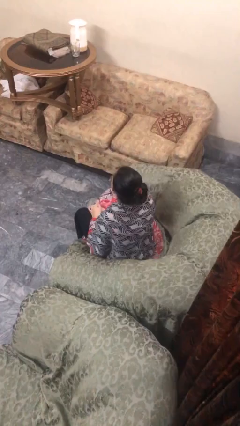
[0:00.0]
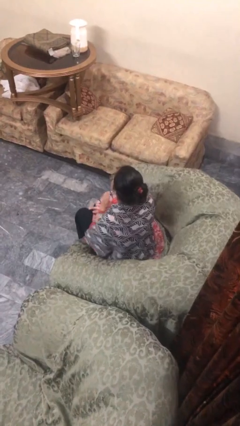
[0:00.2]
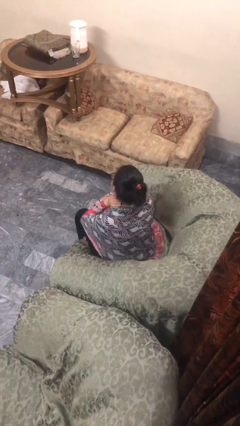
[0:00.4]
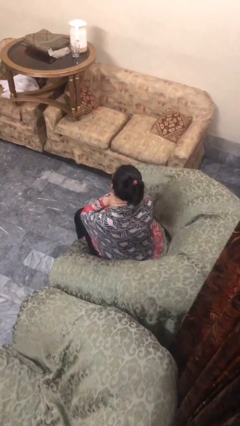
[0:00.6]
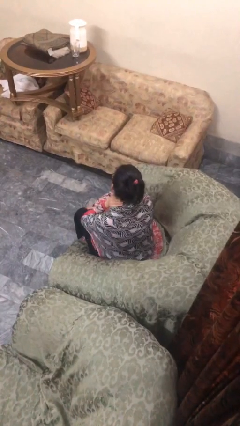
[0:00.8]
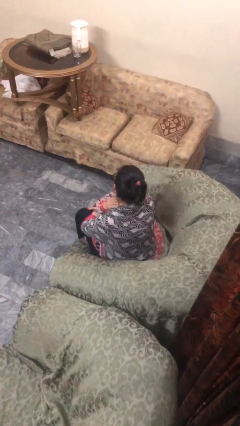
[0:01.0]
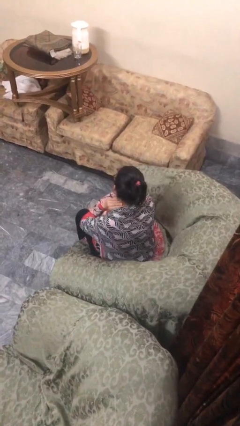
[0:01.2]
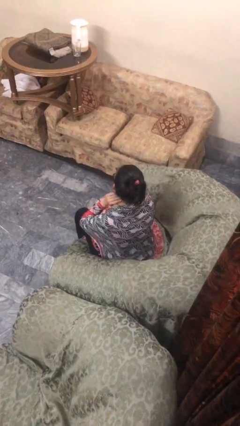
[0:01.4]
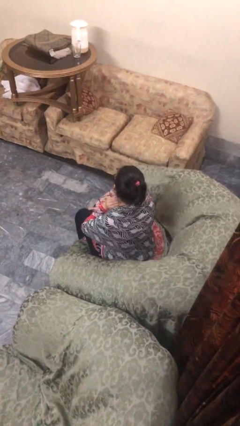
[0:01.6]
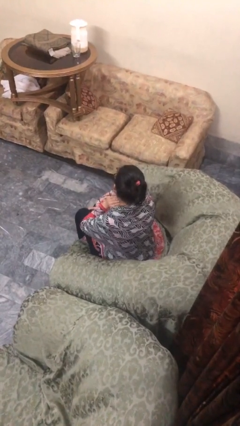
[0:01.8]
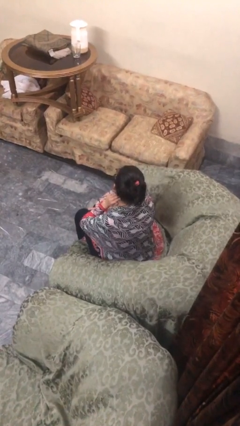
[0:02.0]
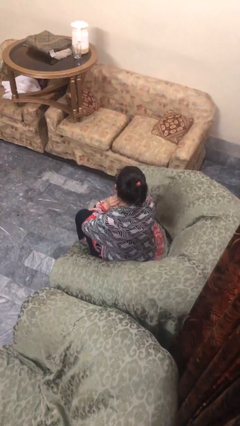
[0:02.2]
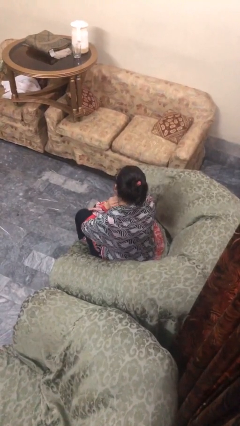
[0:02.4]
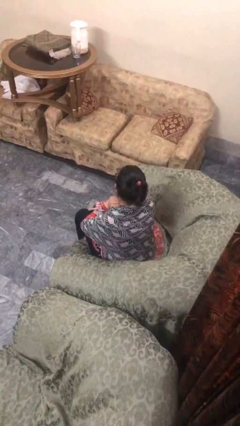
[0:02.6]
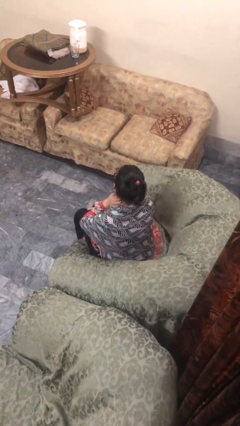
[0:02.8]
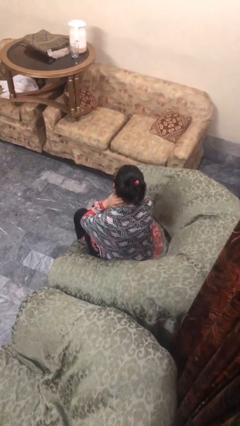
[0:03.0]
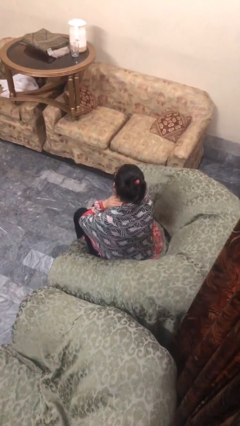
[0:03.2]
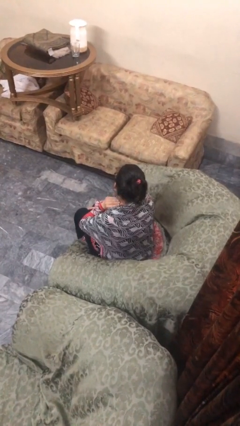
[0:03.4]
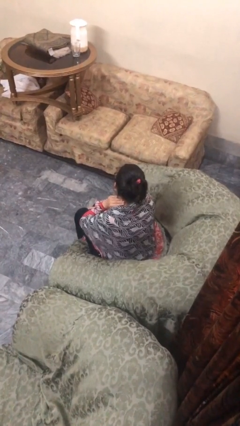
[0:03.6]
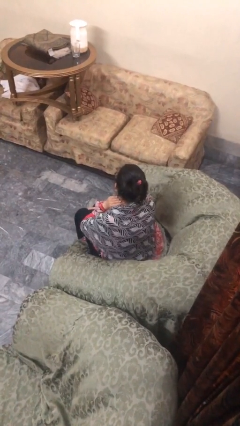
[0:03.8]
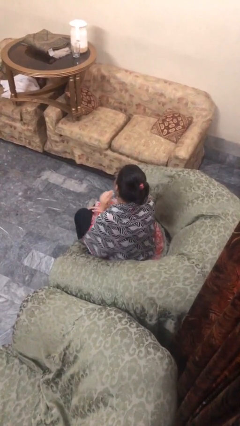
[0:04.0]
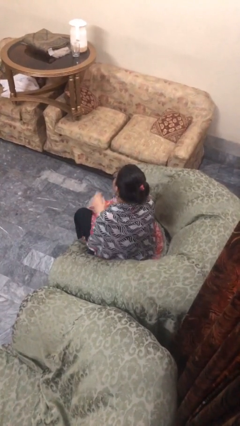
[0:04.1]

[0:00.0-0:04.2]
person rubs neck

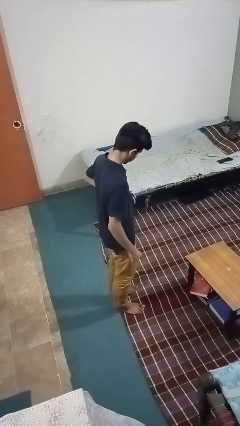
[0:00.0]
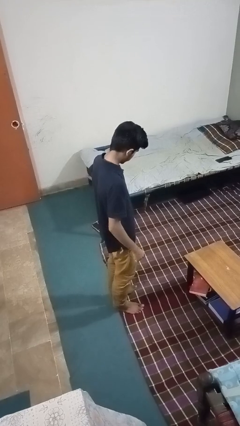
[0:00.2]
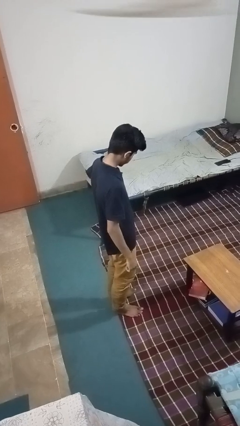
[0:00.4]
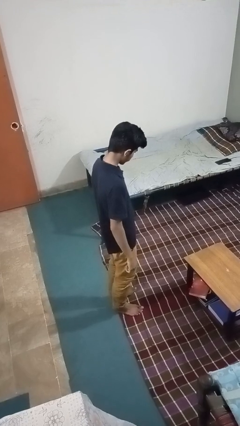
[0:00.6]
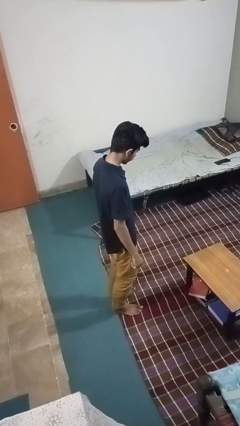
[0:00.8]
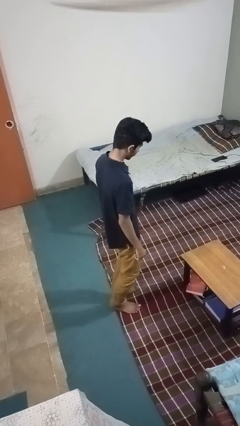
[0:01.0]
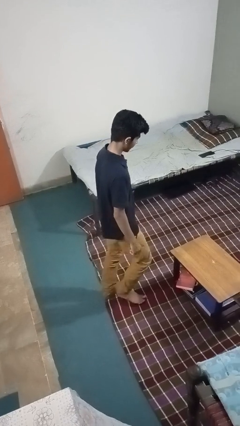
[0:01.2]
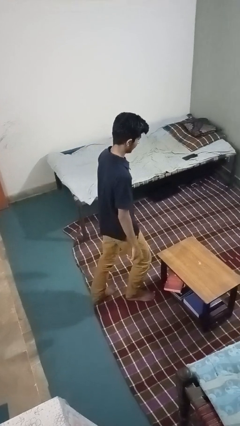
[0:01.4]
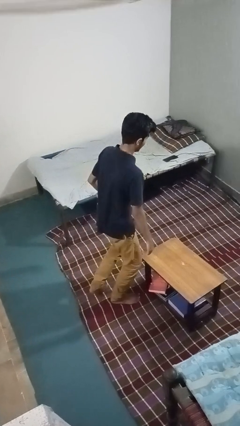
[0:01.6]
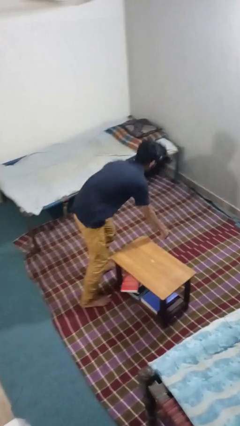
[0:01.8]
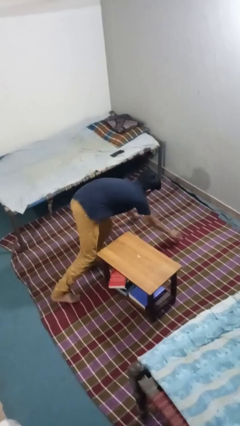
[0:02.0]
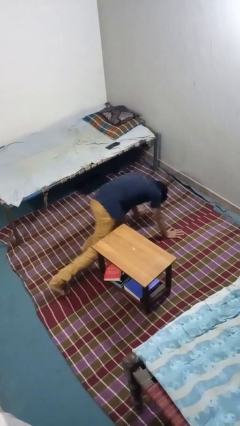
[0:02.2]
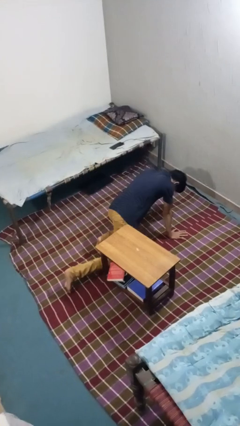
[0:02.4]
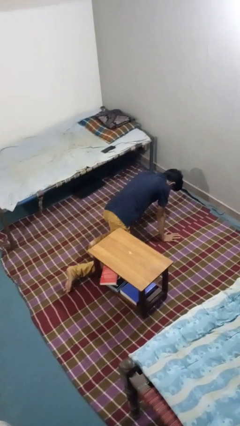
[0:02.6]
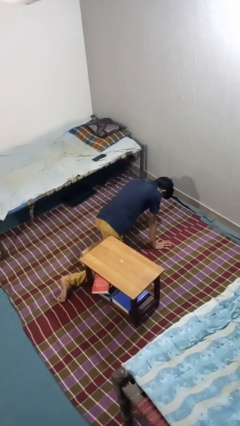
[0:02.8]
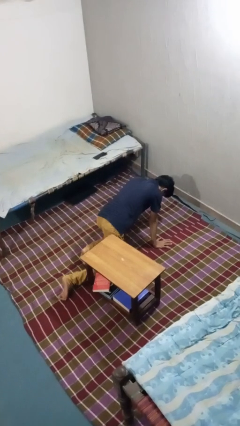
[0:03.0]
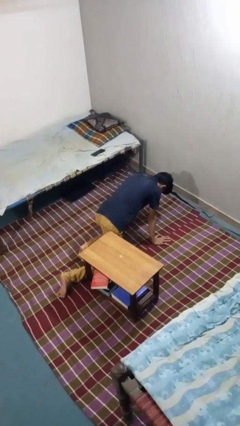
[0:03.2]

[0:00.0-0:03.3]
person trips on object on floor

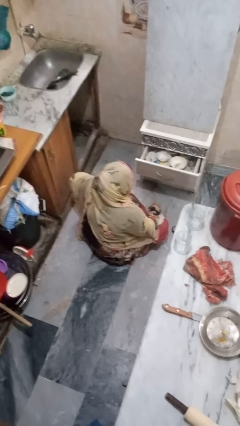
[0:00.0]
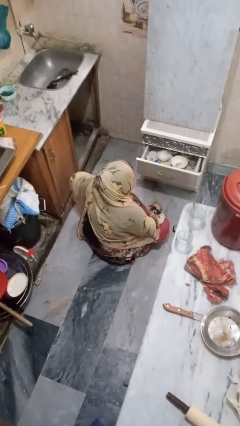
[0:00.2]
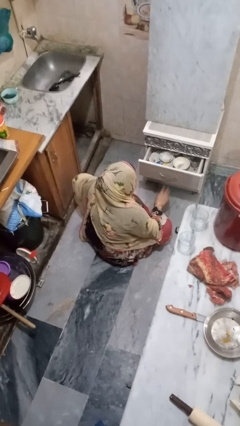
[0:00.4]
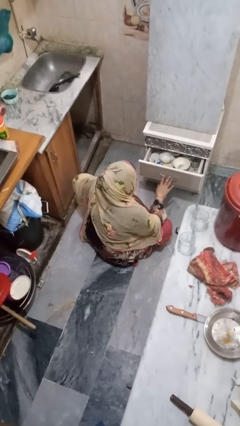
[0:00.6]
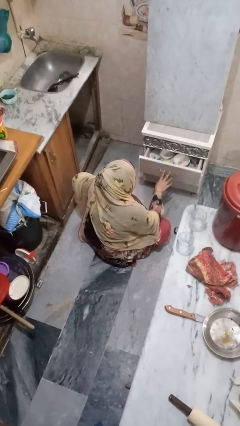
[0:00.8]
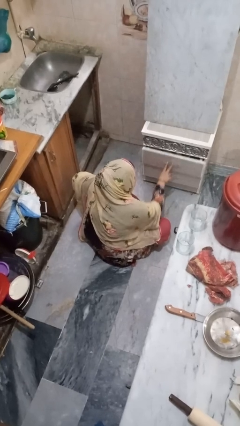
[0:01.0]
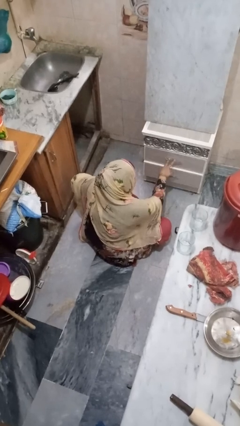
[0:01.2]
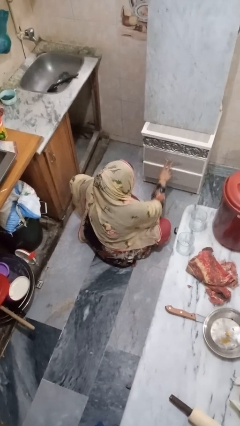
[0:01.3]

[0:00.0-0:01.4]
person closes kitchen drawer

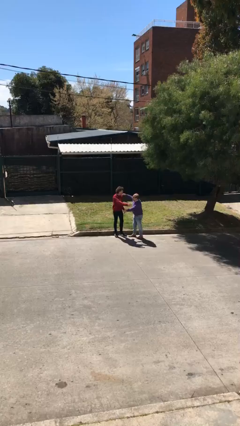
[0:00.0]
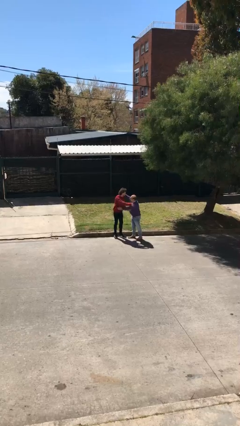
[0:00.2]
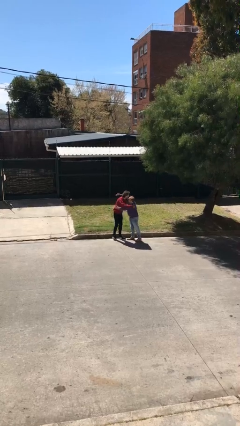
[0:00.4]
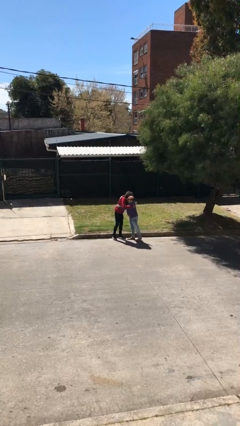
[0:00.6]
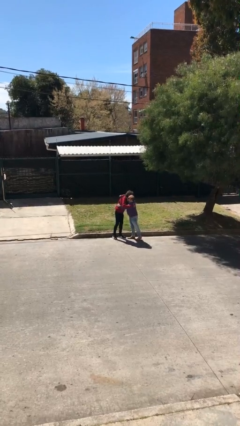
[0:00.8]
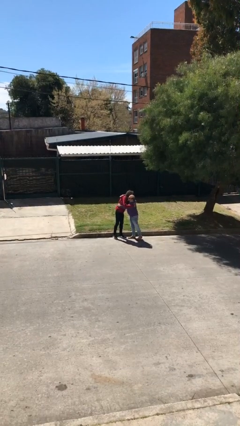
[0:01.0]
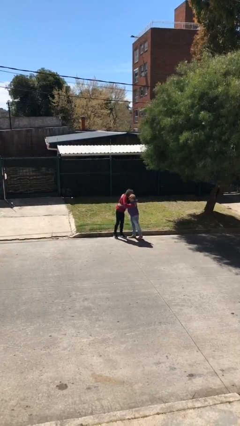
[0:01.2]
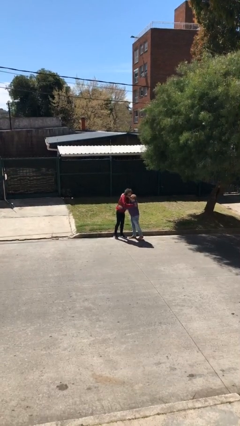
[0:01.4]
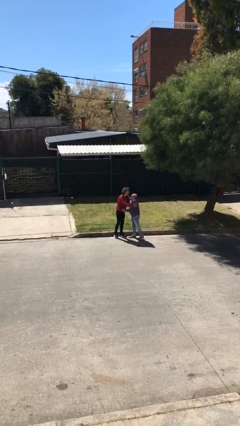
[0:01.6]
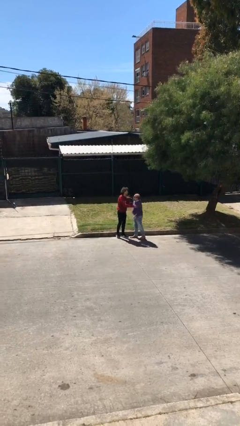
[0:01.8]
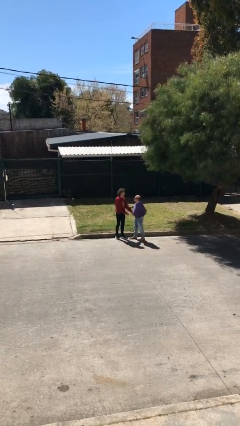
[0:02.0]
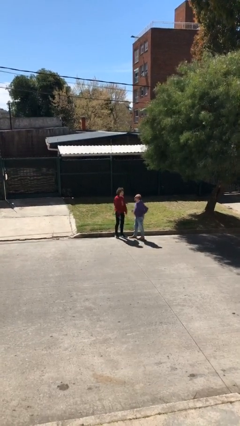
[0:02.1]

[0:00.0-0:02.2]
person embraces person

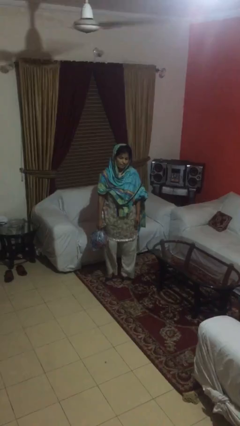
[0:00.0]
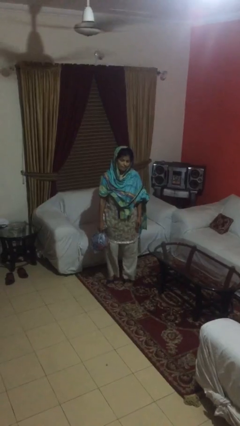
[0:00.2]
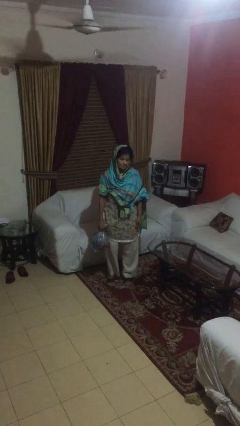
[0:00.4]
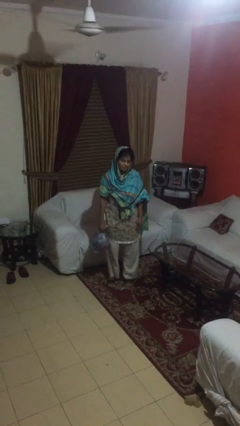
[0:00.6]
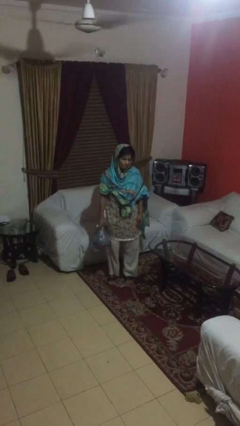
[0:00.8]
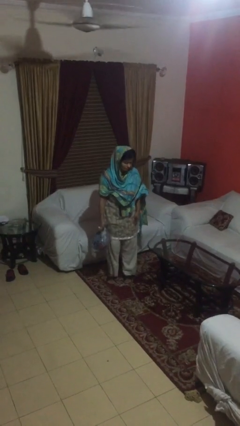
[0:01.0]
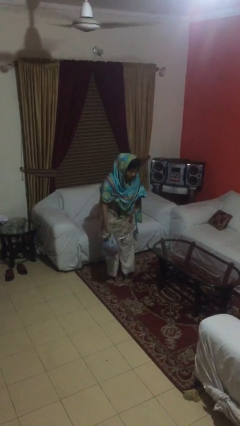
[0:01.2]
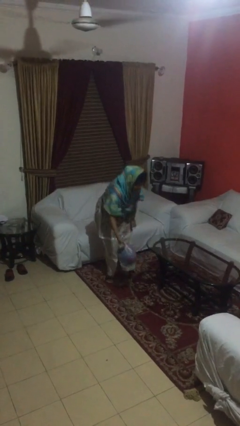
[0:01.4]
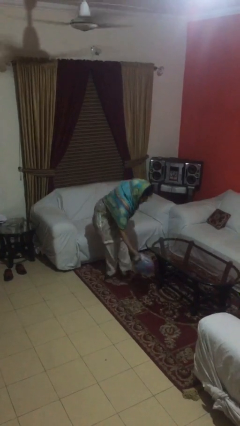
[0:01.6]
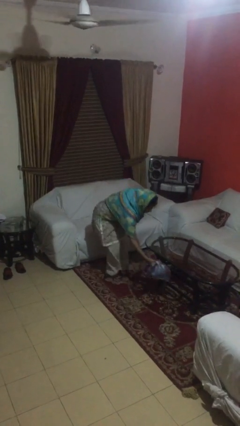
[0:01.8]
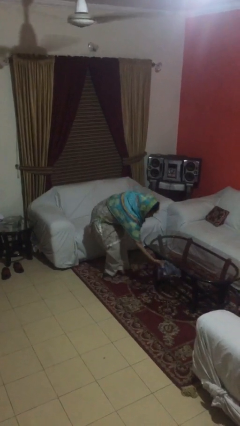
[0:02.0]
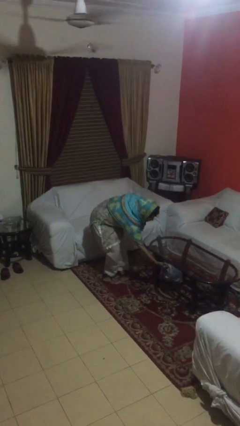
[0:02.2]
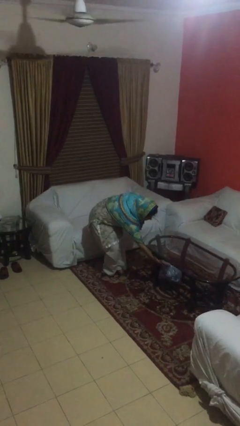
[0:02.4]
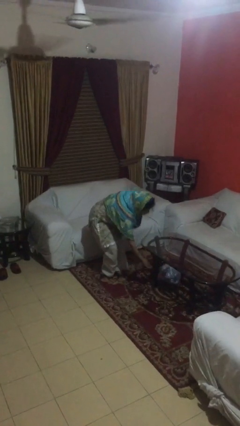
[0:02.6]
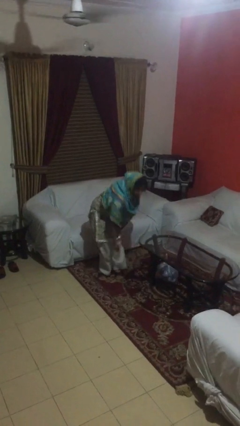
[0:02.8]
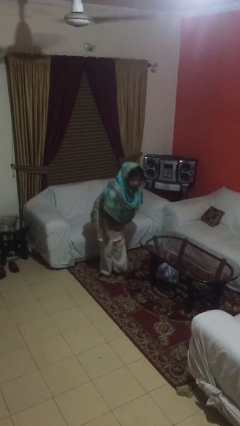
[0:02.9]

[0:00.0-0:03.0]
person puts down object on table

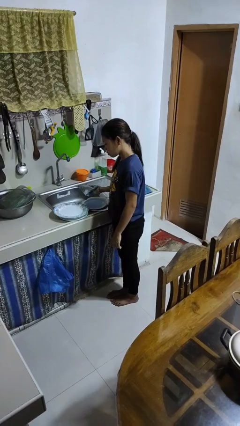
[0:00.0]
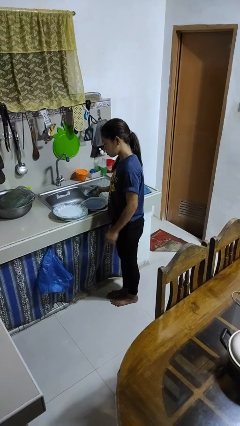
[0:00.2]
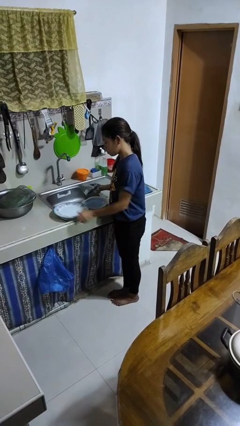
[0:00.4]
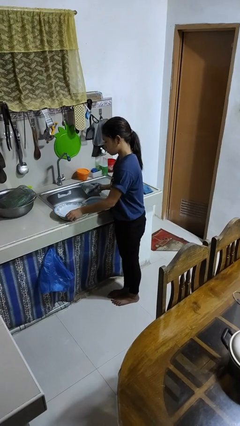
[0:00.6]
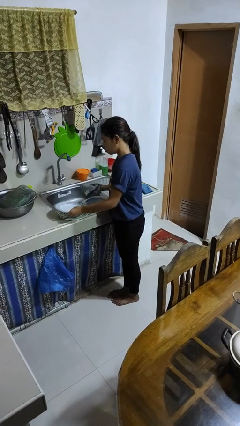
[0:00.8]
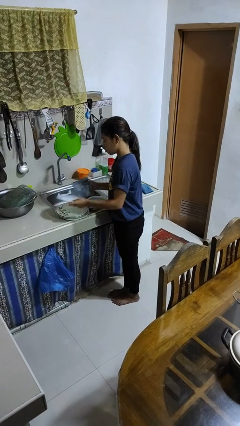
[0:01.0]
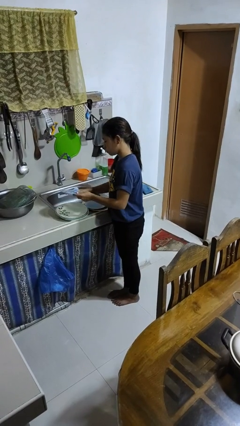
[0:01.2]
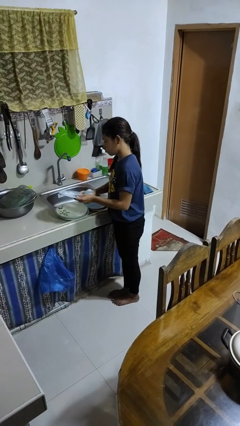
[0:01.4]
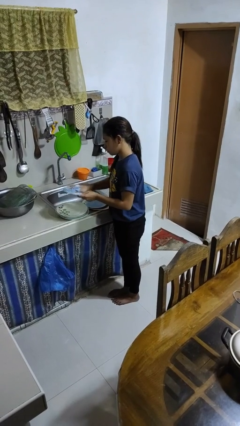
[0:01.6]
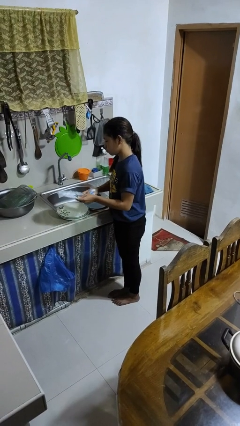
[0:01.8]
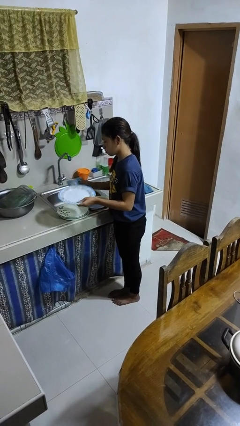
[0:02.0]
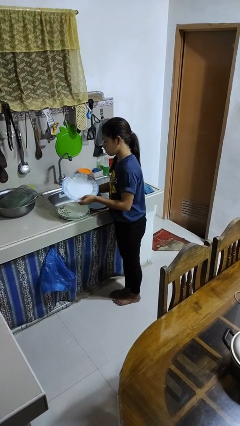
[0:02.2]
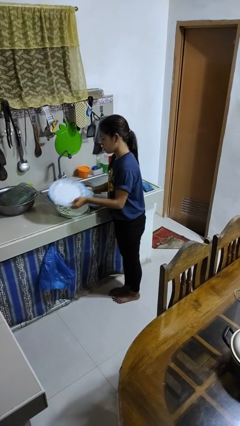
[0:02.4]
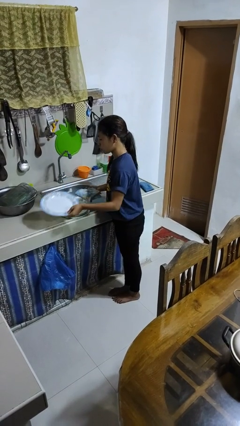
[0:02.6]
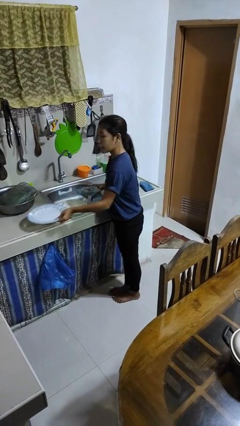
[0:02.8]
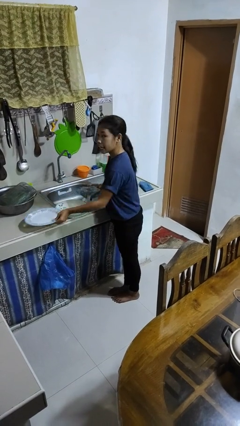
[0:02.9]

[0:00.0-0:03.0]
person dries dish
